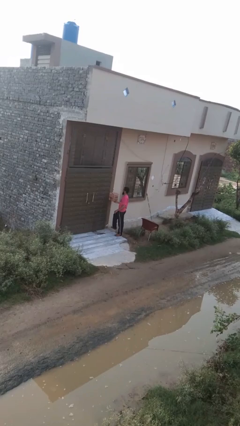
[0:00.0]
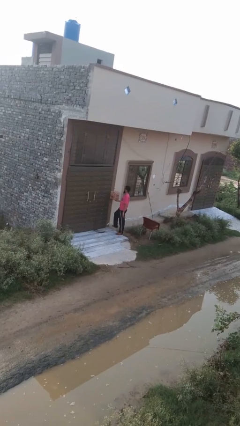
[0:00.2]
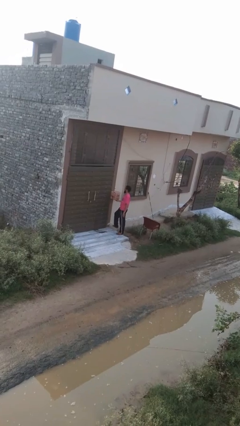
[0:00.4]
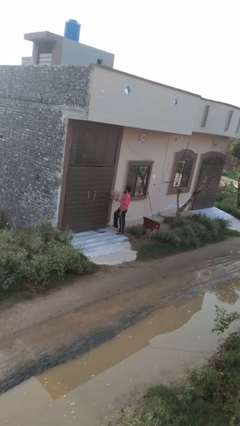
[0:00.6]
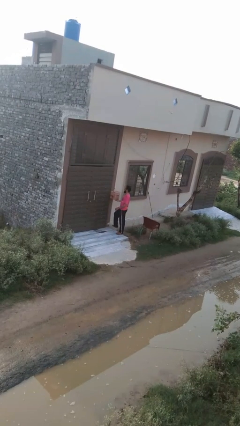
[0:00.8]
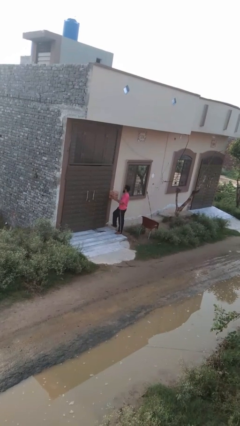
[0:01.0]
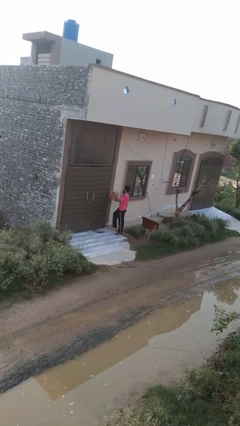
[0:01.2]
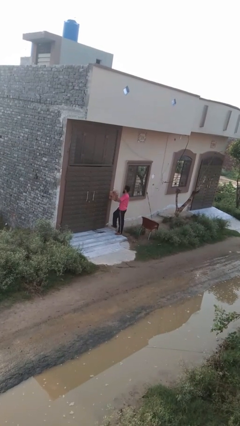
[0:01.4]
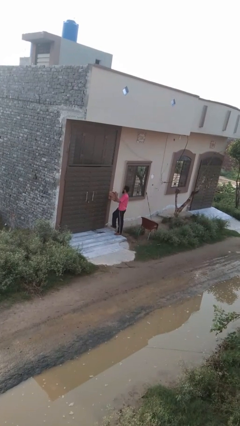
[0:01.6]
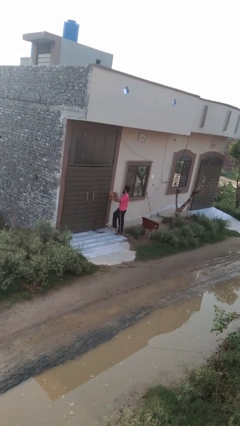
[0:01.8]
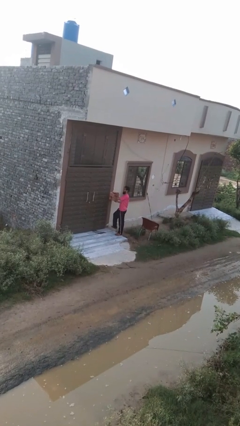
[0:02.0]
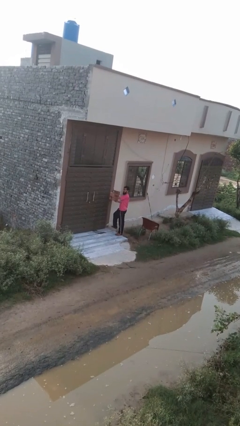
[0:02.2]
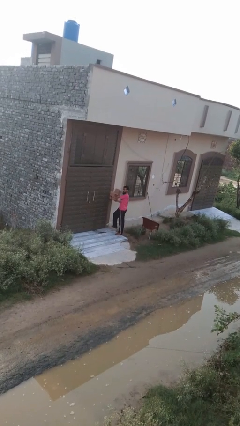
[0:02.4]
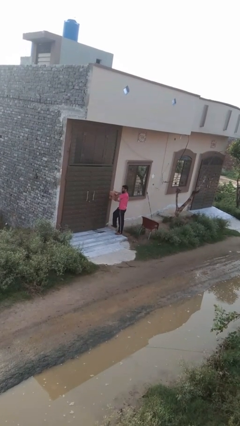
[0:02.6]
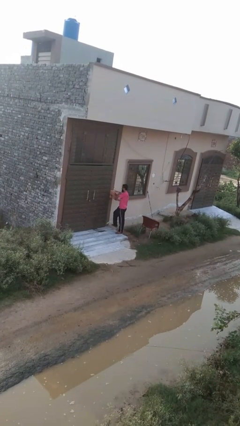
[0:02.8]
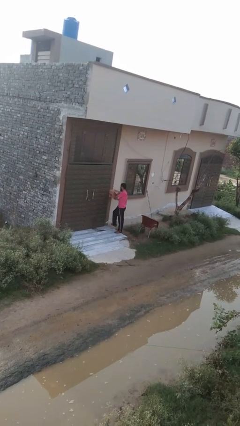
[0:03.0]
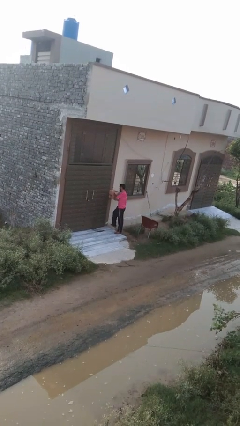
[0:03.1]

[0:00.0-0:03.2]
person opens mailbox

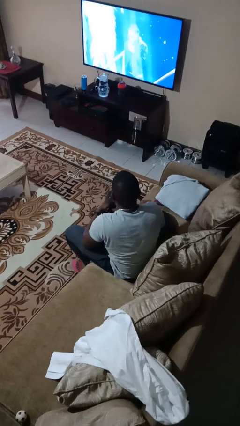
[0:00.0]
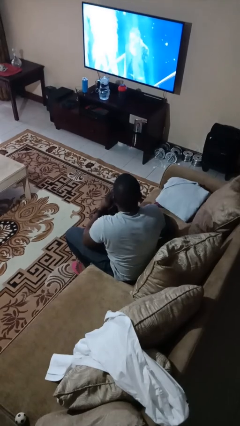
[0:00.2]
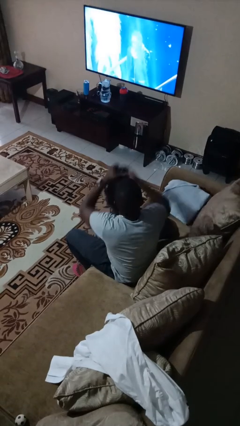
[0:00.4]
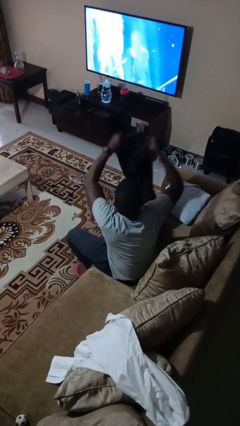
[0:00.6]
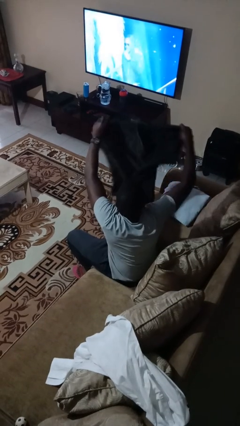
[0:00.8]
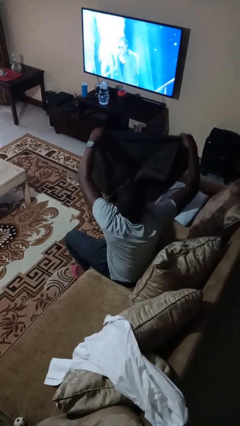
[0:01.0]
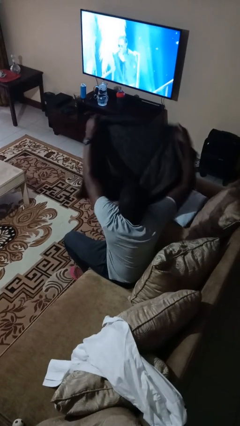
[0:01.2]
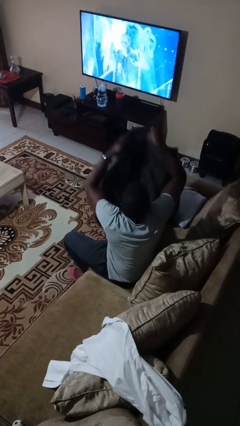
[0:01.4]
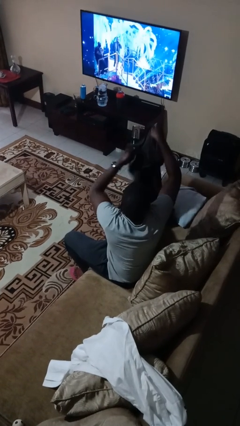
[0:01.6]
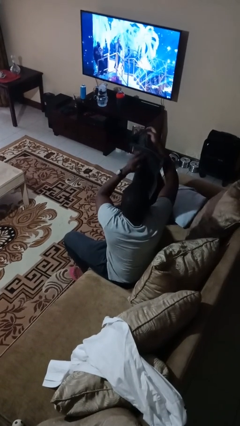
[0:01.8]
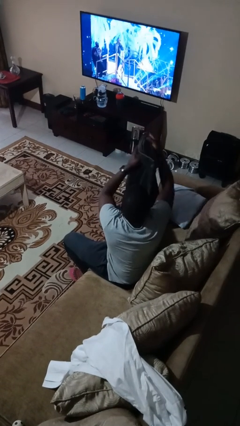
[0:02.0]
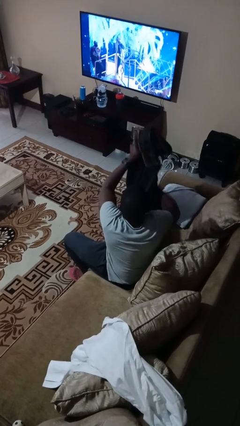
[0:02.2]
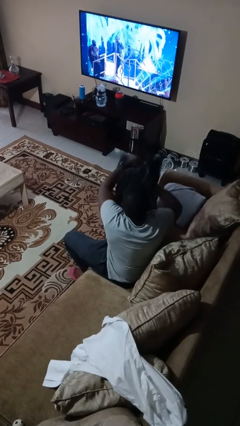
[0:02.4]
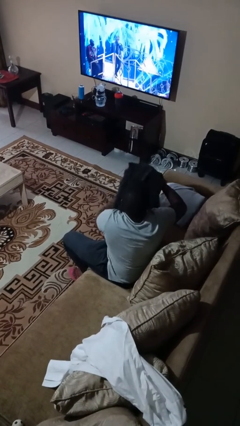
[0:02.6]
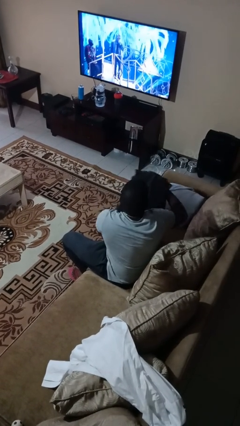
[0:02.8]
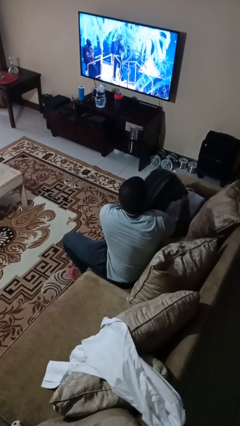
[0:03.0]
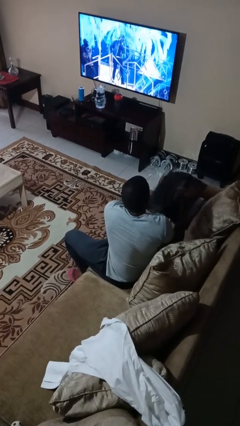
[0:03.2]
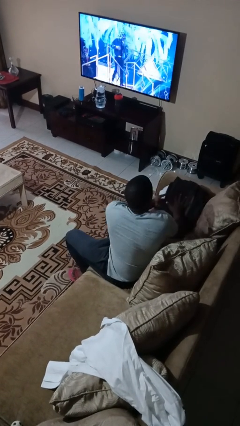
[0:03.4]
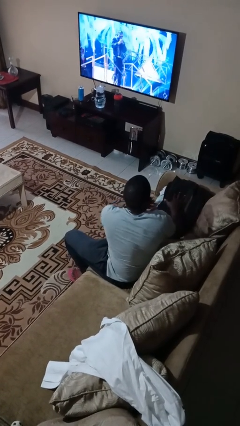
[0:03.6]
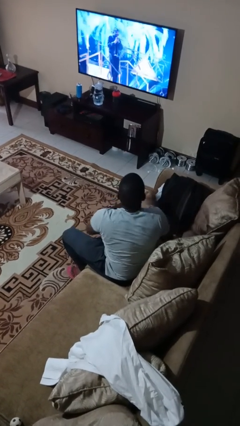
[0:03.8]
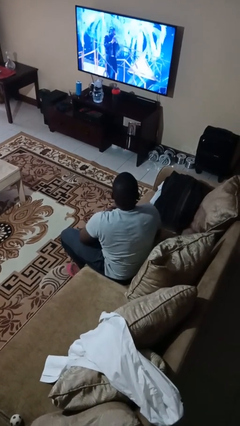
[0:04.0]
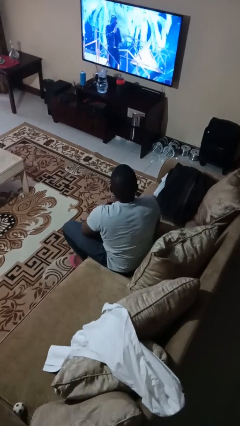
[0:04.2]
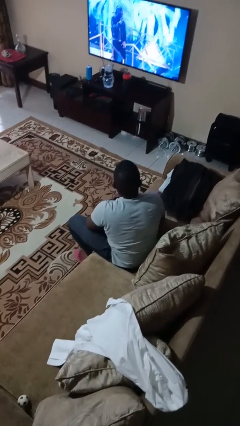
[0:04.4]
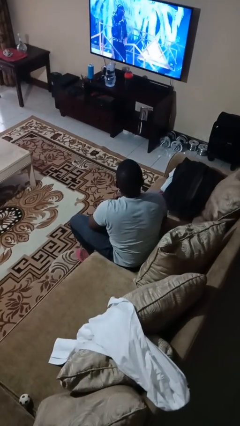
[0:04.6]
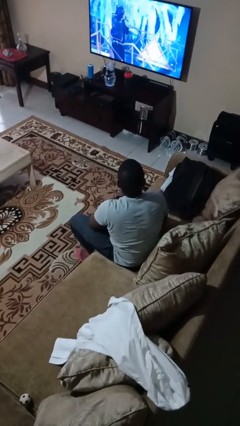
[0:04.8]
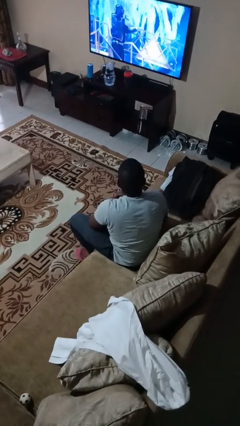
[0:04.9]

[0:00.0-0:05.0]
person folds towel

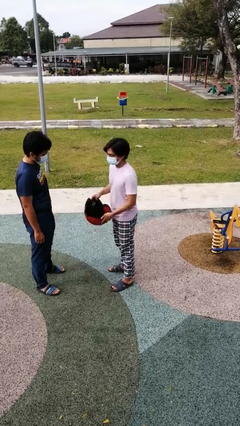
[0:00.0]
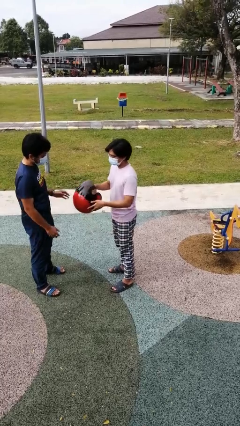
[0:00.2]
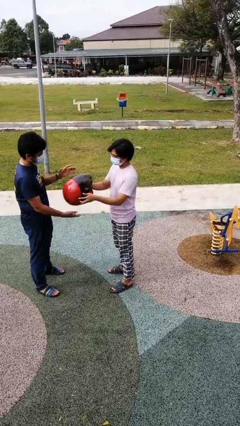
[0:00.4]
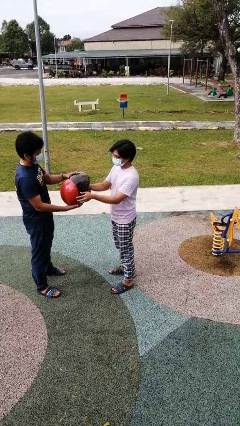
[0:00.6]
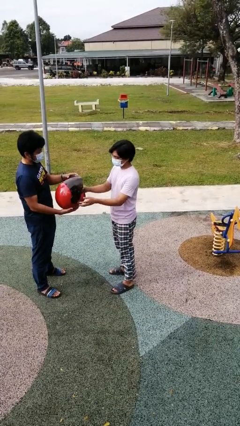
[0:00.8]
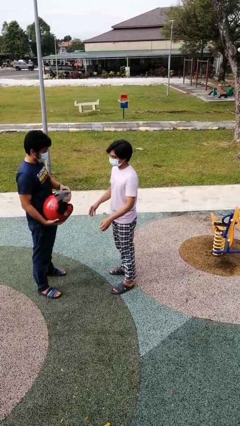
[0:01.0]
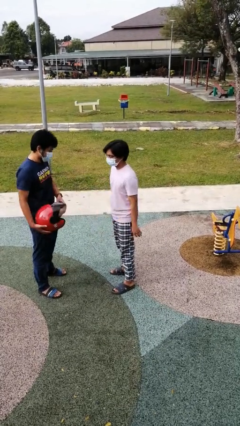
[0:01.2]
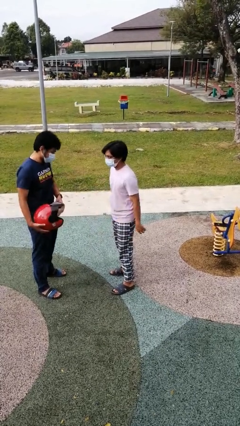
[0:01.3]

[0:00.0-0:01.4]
person transfers object to person

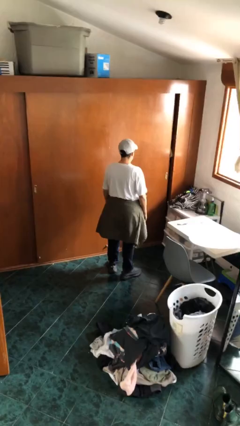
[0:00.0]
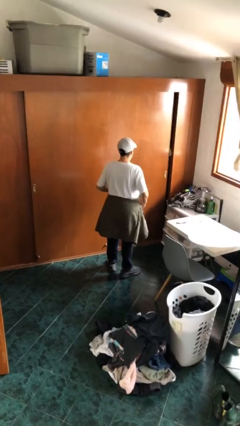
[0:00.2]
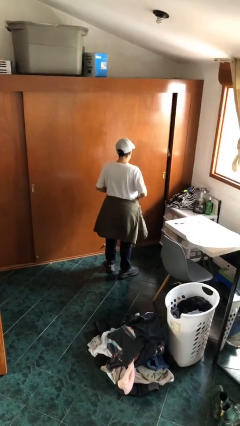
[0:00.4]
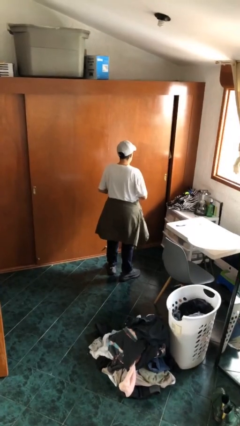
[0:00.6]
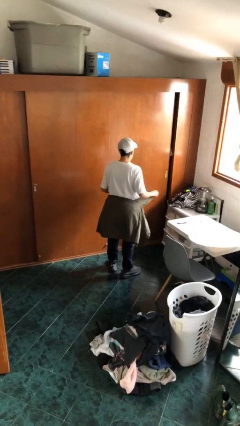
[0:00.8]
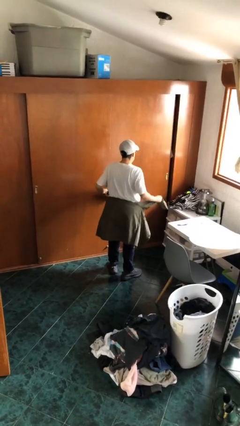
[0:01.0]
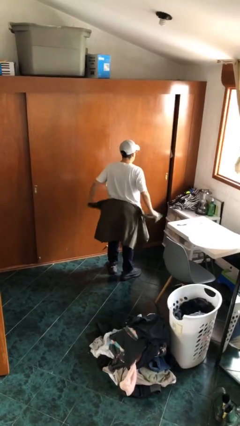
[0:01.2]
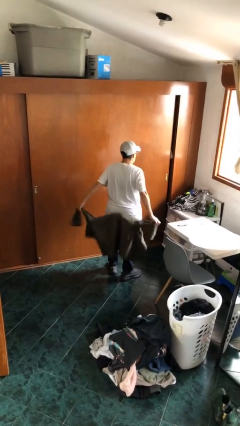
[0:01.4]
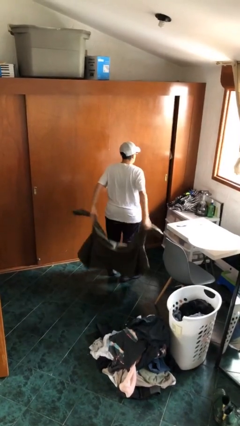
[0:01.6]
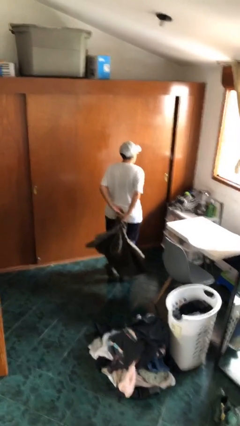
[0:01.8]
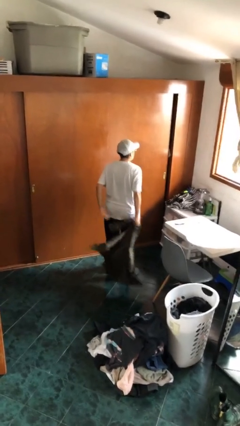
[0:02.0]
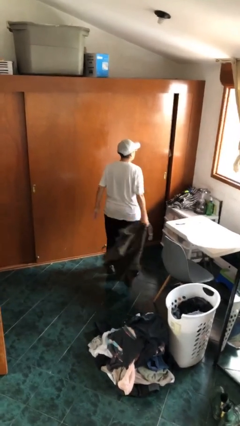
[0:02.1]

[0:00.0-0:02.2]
person unties jacket around waist

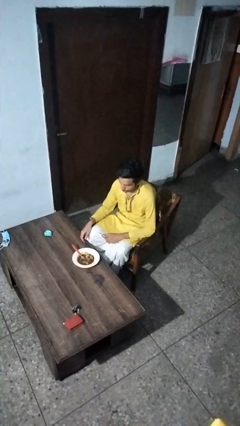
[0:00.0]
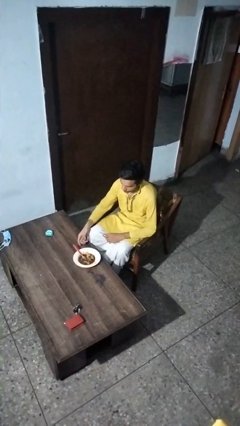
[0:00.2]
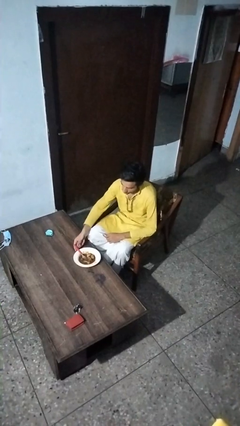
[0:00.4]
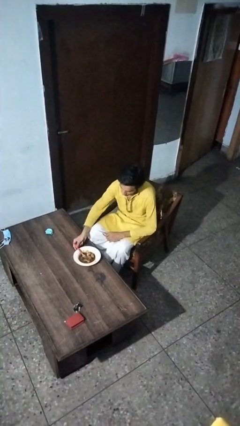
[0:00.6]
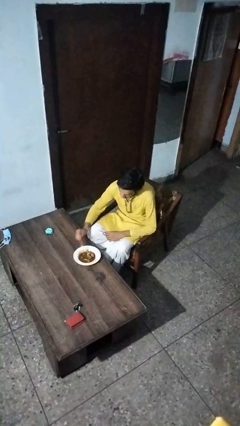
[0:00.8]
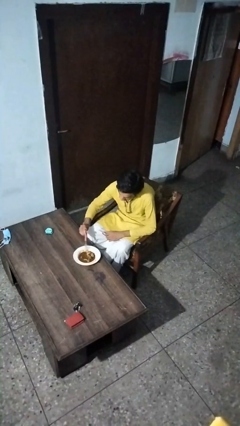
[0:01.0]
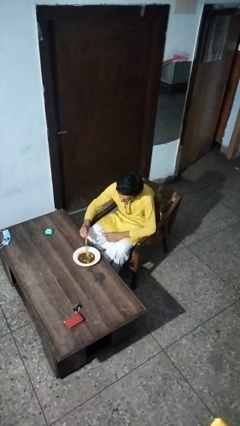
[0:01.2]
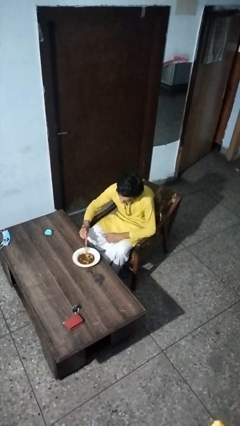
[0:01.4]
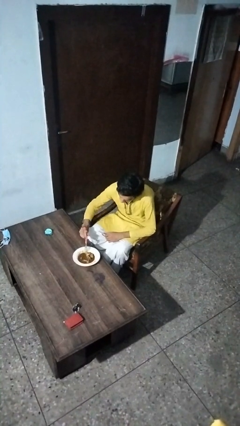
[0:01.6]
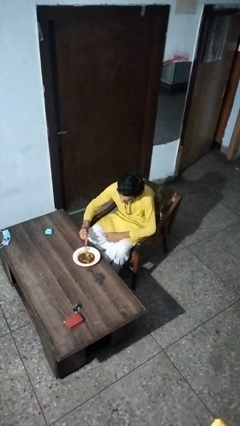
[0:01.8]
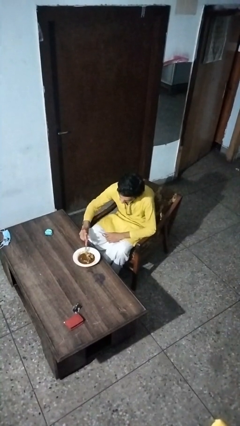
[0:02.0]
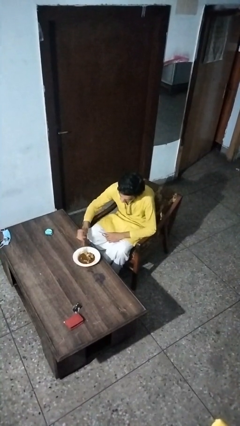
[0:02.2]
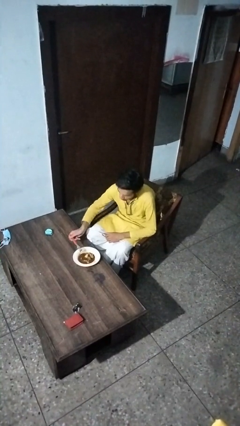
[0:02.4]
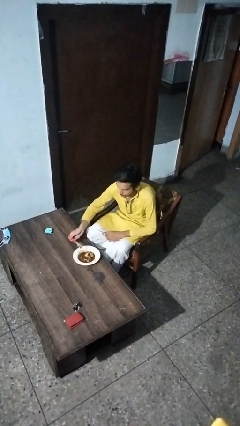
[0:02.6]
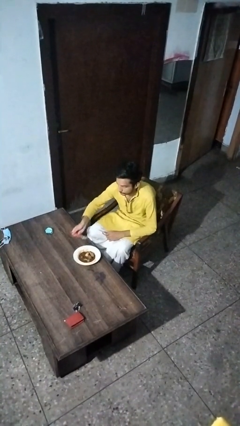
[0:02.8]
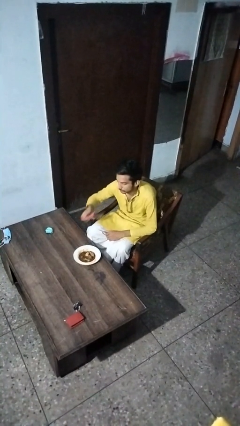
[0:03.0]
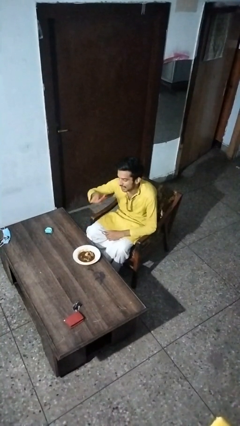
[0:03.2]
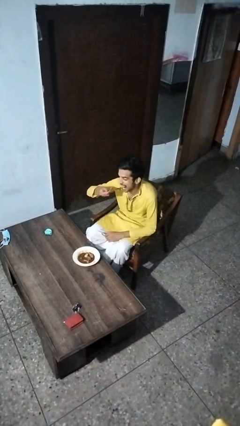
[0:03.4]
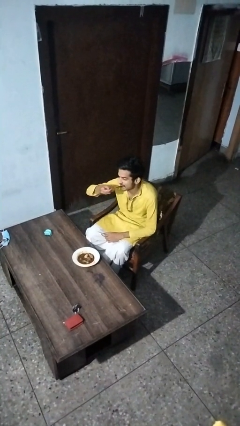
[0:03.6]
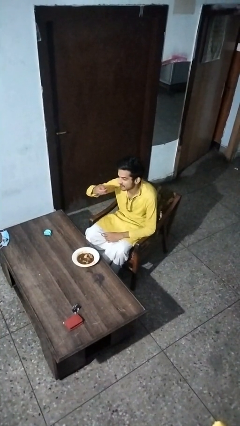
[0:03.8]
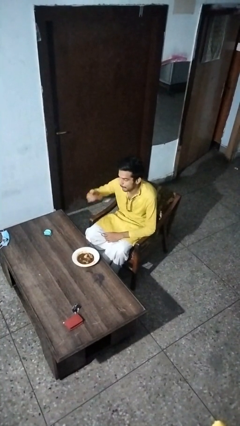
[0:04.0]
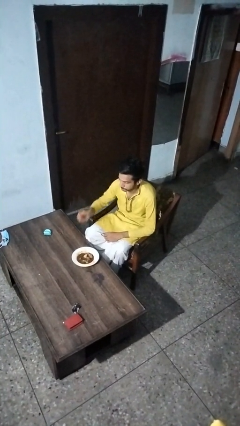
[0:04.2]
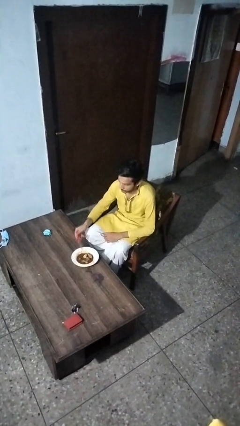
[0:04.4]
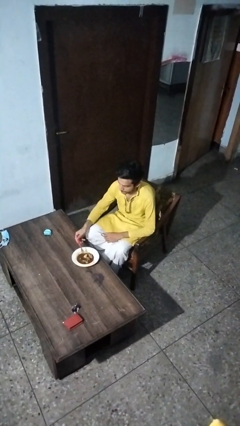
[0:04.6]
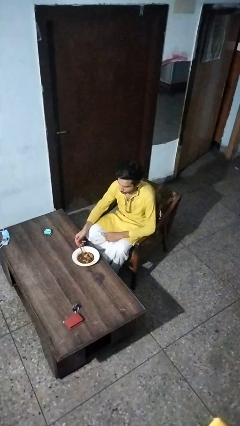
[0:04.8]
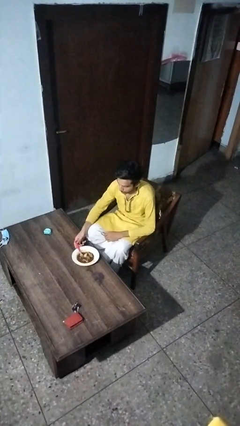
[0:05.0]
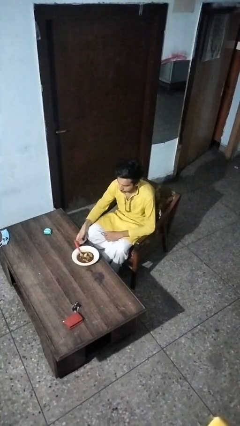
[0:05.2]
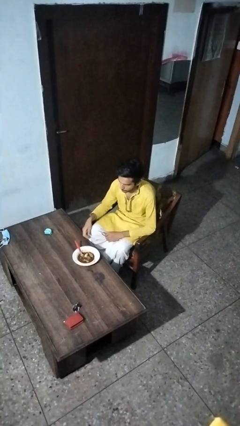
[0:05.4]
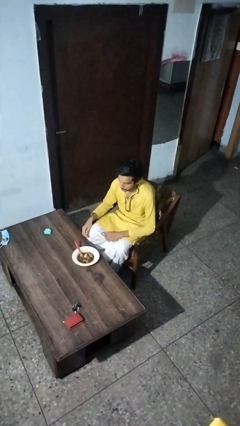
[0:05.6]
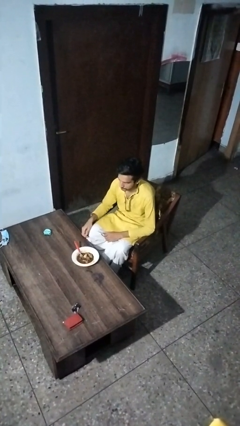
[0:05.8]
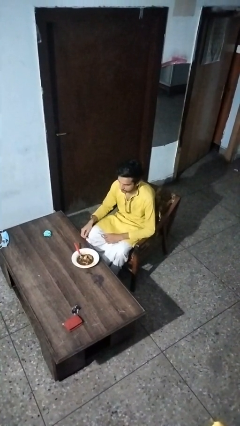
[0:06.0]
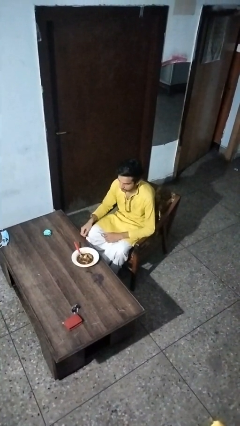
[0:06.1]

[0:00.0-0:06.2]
person eats with utensil

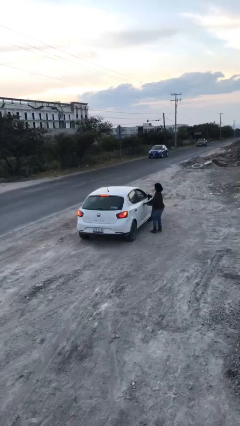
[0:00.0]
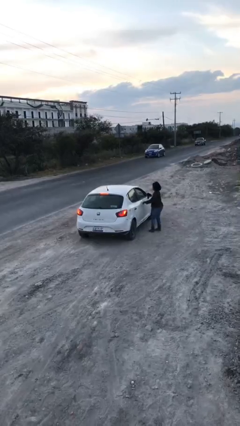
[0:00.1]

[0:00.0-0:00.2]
car picks up person
